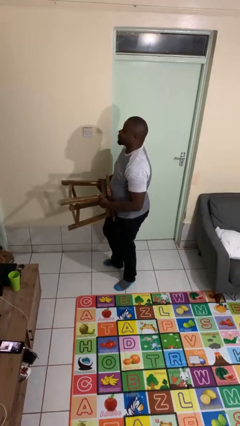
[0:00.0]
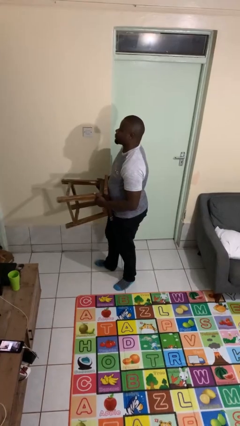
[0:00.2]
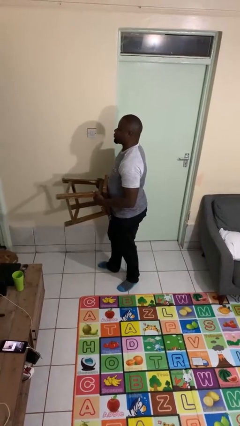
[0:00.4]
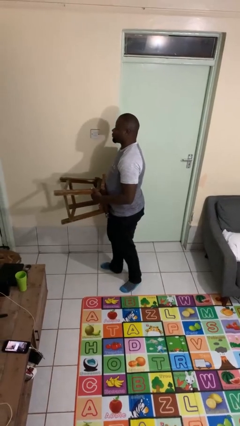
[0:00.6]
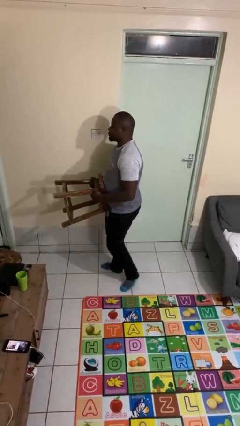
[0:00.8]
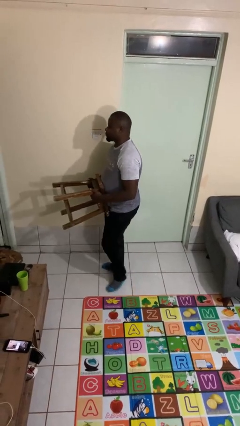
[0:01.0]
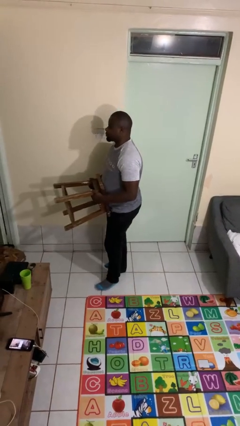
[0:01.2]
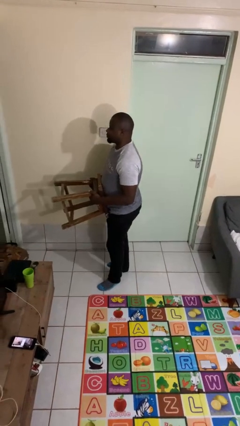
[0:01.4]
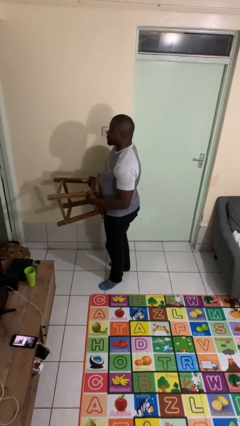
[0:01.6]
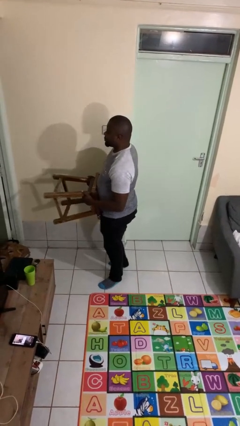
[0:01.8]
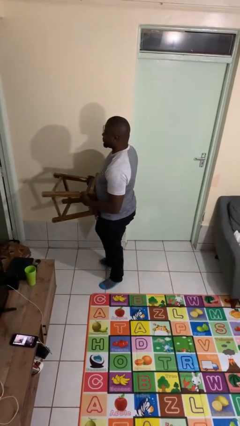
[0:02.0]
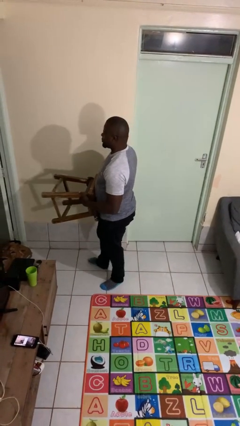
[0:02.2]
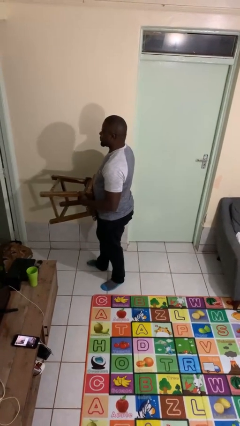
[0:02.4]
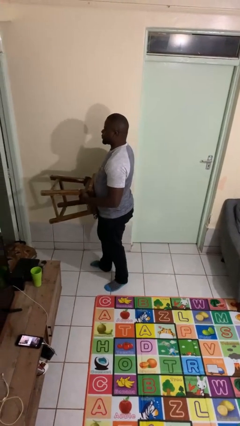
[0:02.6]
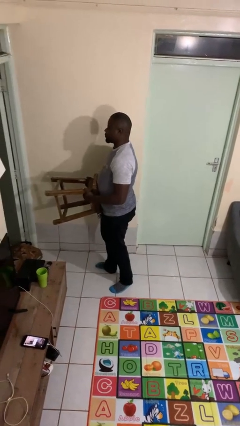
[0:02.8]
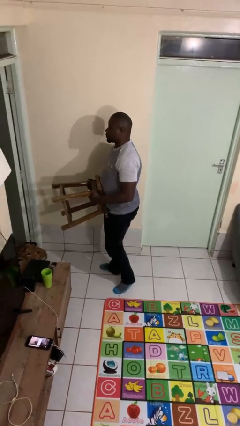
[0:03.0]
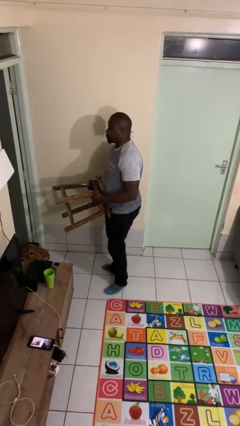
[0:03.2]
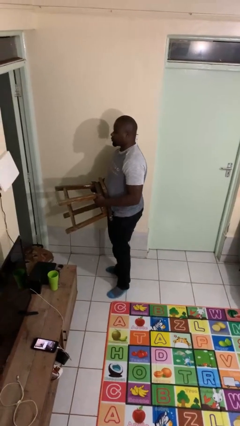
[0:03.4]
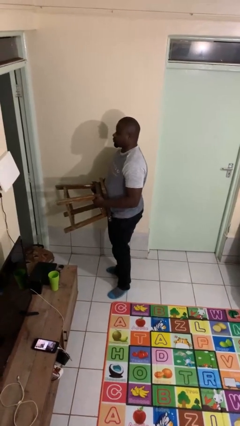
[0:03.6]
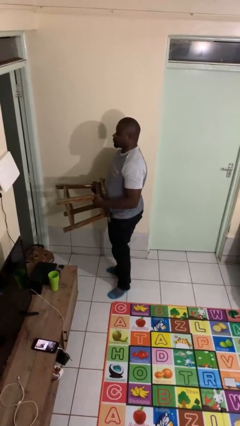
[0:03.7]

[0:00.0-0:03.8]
person carries furniture

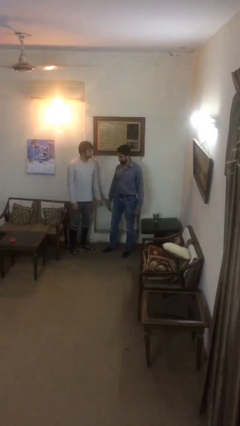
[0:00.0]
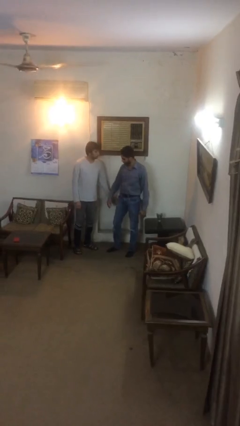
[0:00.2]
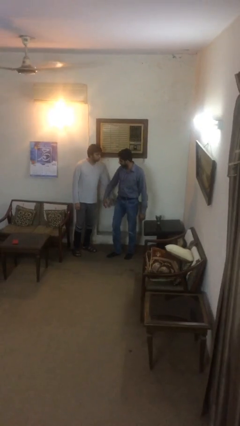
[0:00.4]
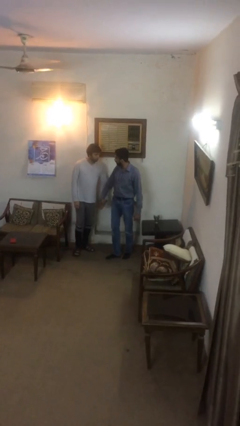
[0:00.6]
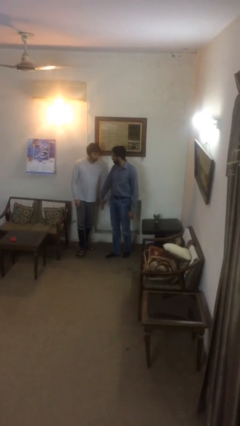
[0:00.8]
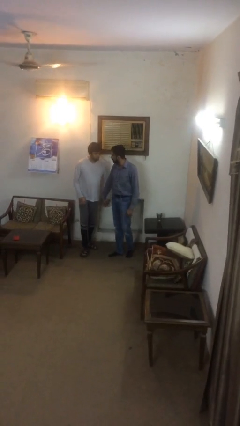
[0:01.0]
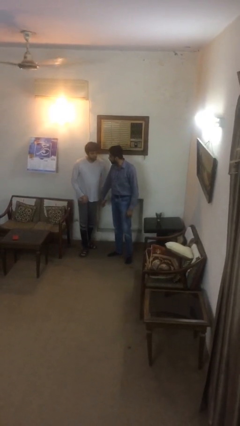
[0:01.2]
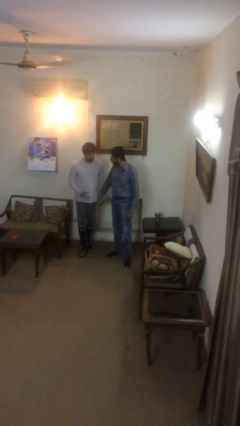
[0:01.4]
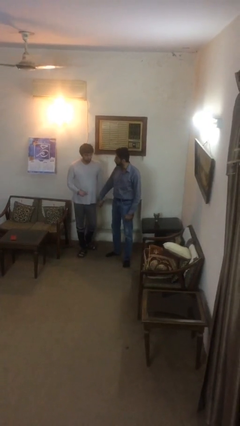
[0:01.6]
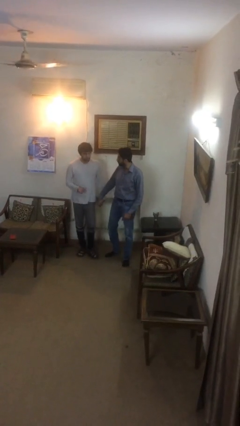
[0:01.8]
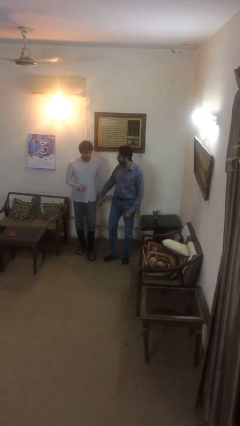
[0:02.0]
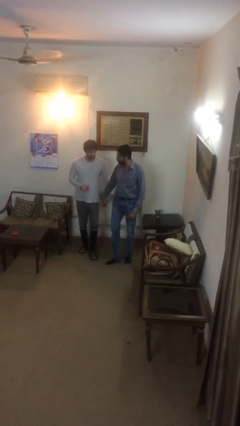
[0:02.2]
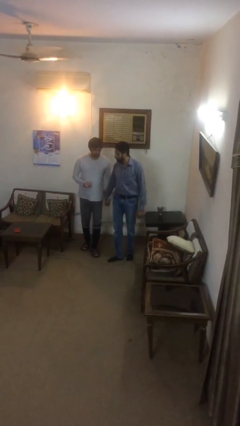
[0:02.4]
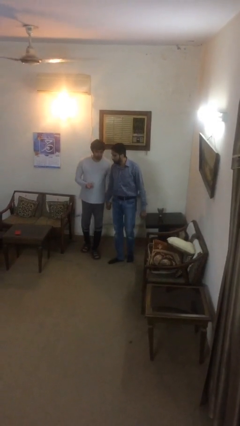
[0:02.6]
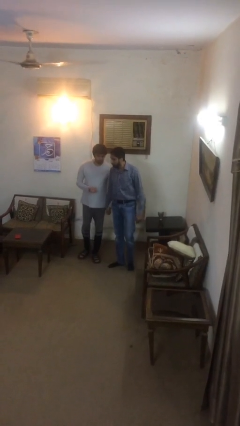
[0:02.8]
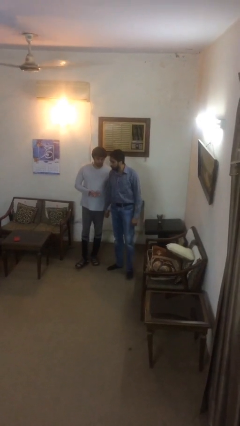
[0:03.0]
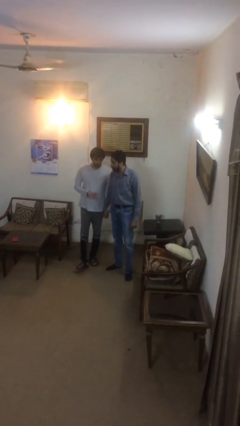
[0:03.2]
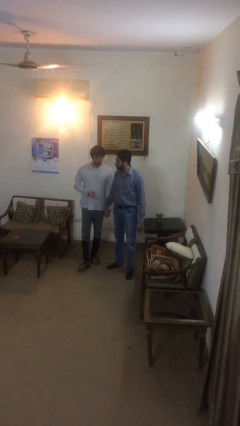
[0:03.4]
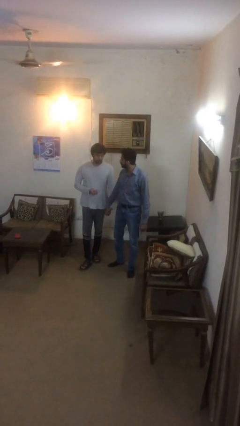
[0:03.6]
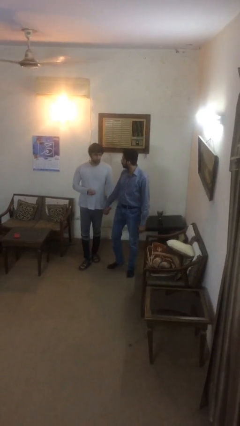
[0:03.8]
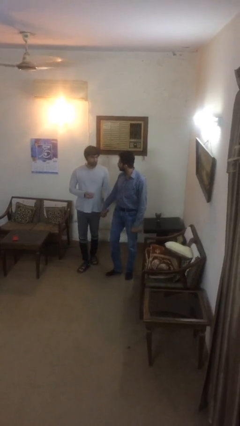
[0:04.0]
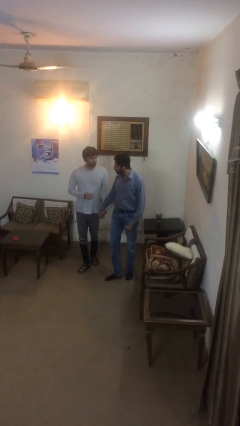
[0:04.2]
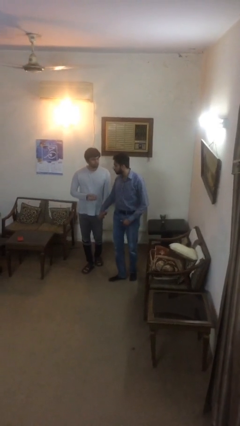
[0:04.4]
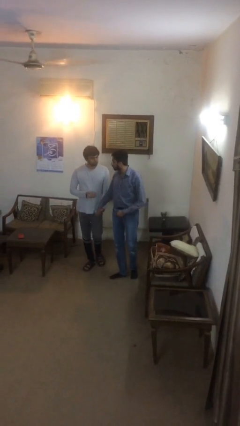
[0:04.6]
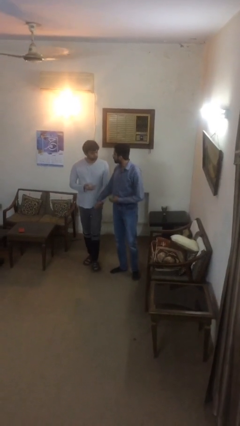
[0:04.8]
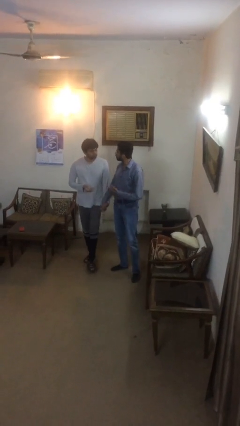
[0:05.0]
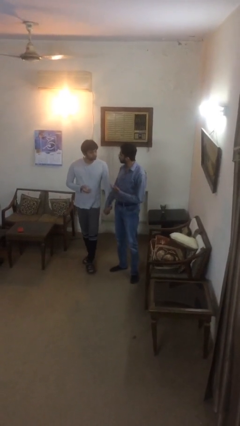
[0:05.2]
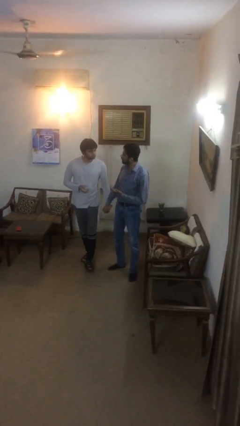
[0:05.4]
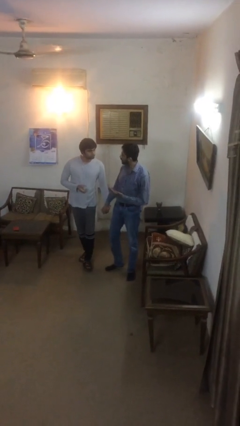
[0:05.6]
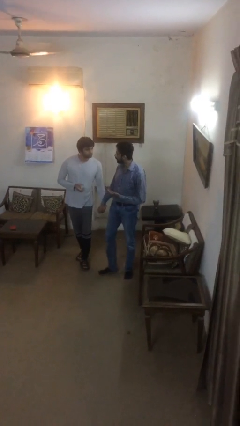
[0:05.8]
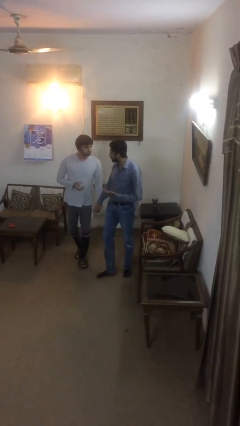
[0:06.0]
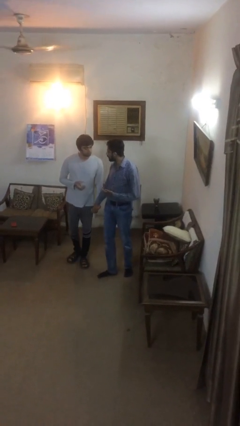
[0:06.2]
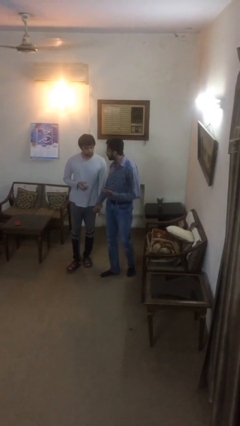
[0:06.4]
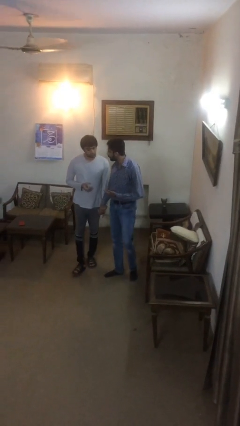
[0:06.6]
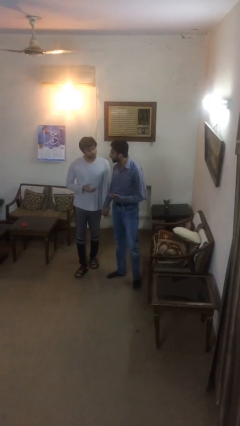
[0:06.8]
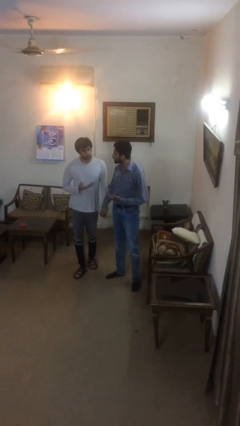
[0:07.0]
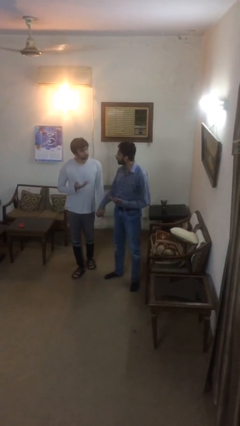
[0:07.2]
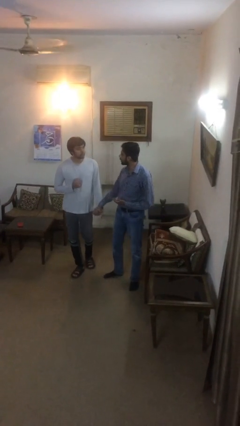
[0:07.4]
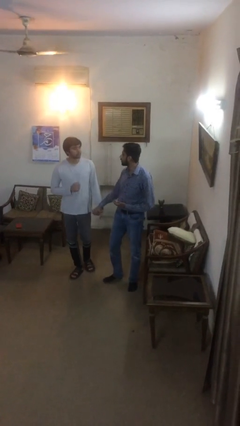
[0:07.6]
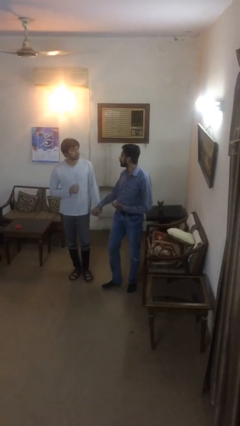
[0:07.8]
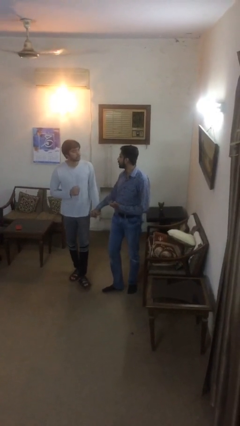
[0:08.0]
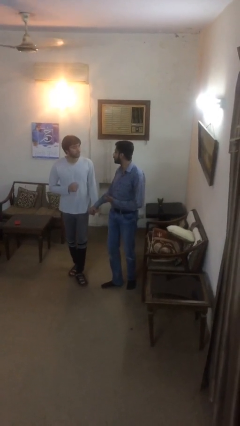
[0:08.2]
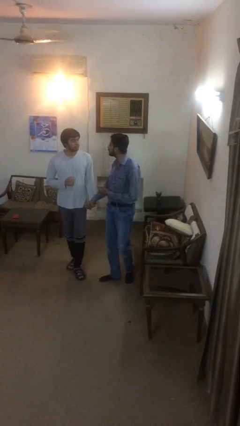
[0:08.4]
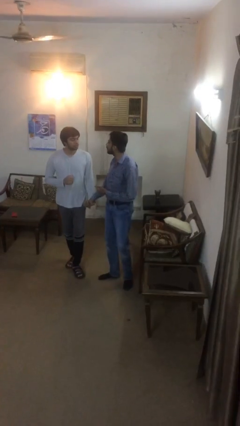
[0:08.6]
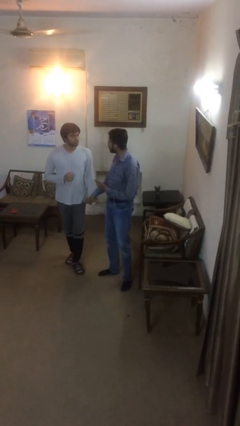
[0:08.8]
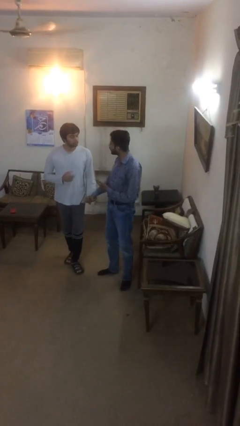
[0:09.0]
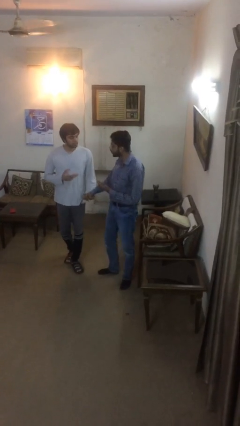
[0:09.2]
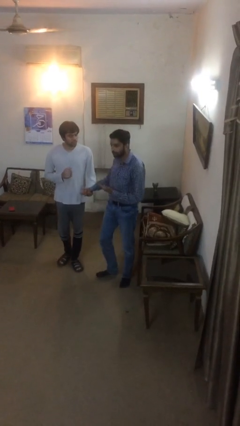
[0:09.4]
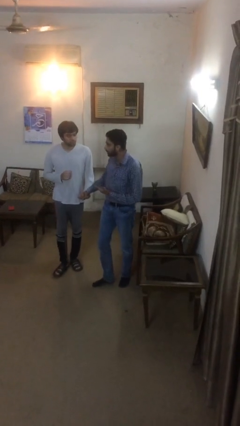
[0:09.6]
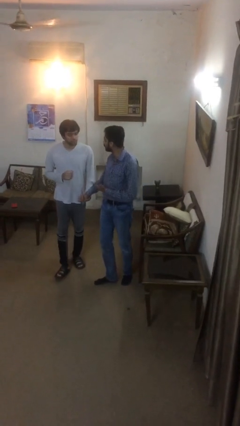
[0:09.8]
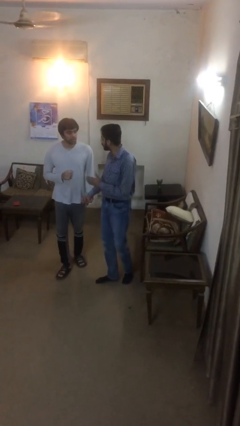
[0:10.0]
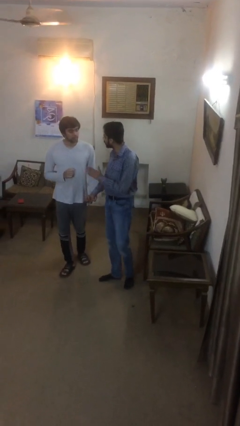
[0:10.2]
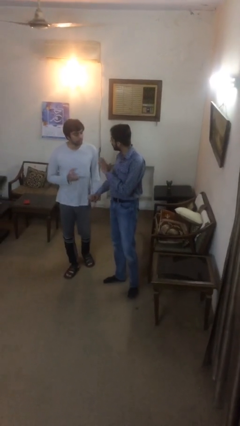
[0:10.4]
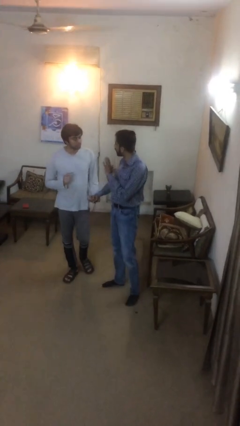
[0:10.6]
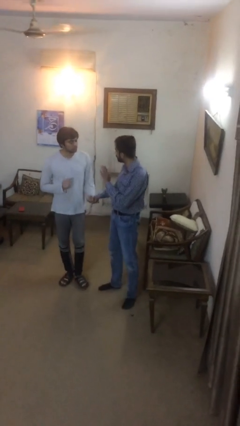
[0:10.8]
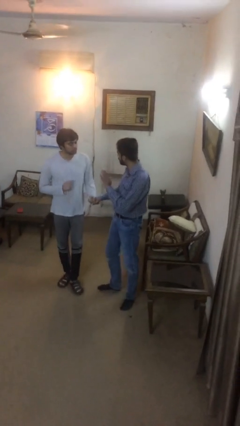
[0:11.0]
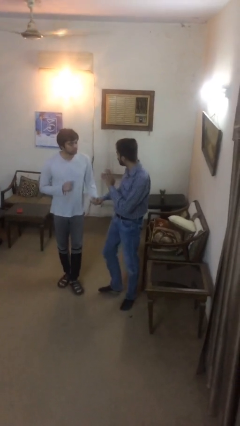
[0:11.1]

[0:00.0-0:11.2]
person holds hand

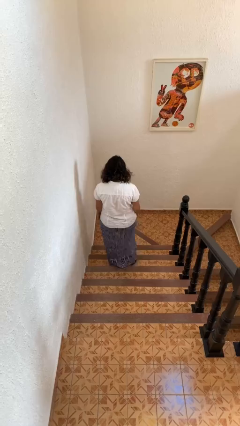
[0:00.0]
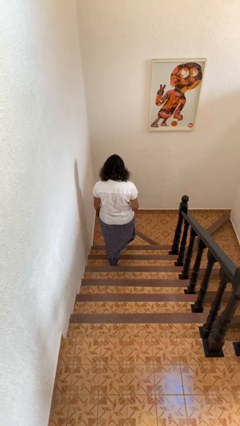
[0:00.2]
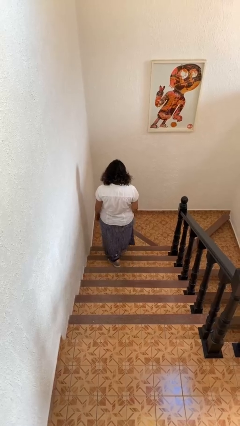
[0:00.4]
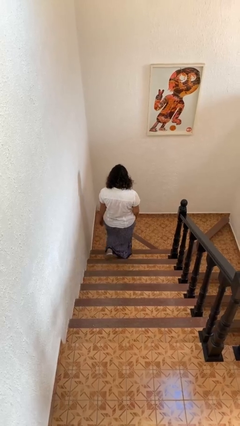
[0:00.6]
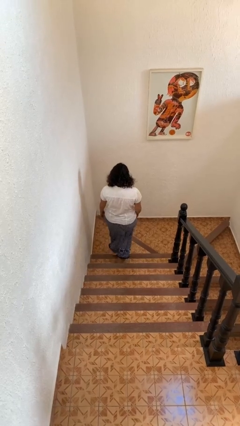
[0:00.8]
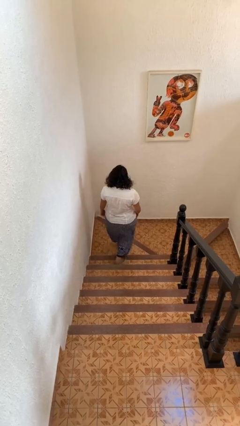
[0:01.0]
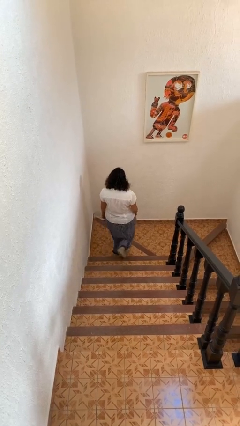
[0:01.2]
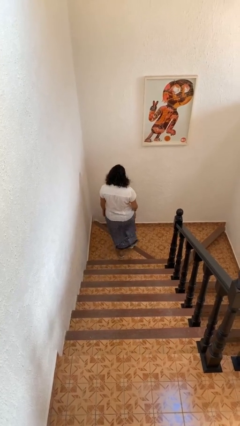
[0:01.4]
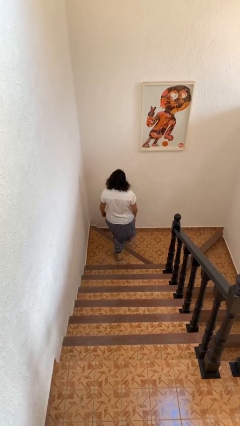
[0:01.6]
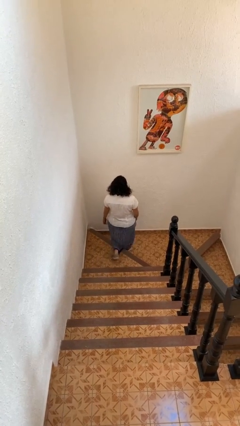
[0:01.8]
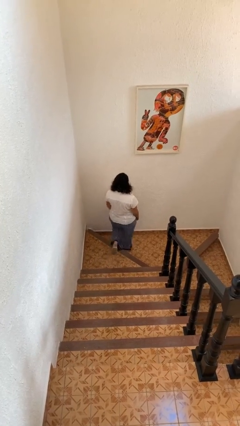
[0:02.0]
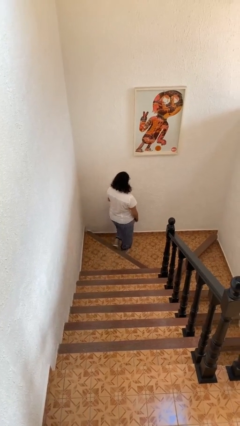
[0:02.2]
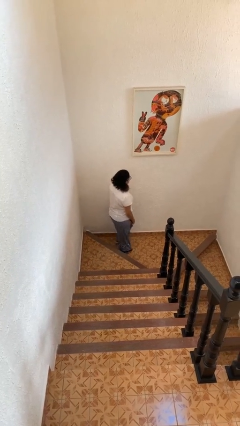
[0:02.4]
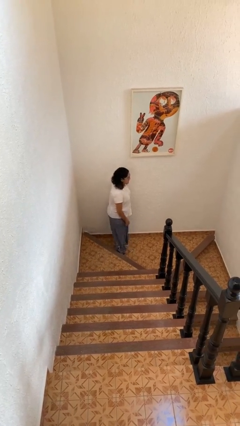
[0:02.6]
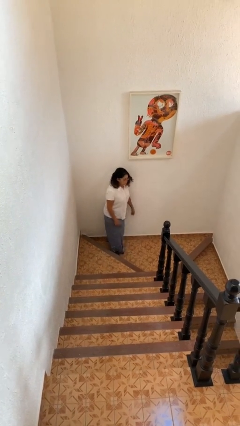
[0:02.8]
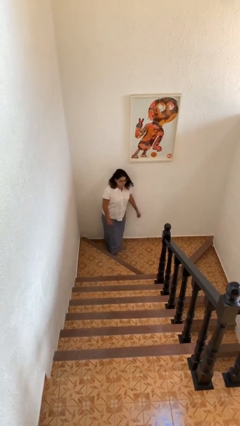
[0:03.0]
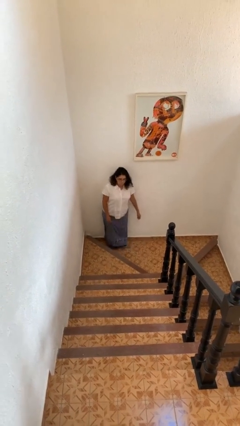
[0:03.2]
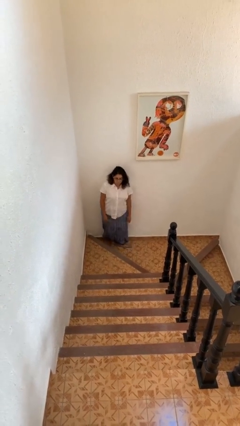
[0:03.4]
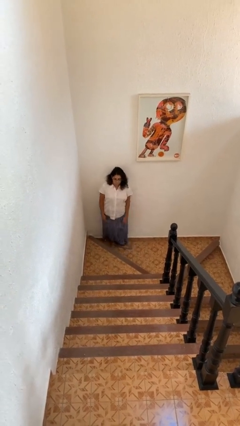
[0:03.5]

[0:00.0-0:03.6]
person climbs down stairs
